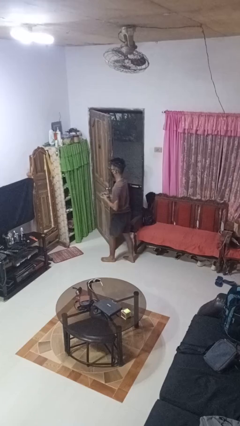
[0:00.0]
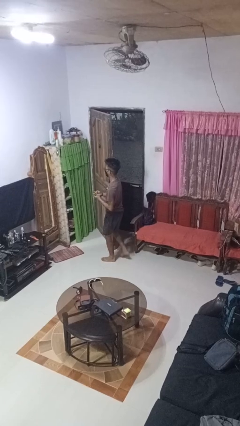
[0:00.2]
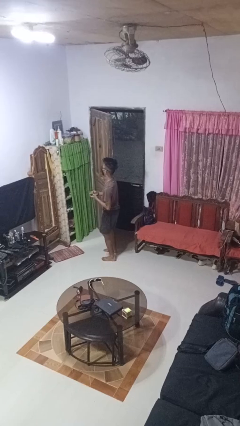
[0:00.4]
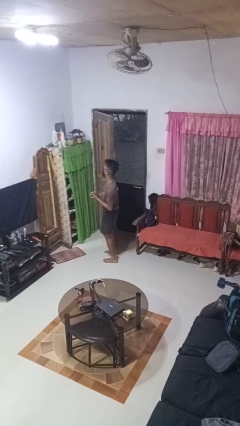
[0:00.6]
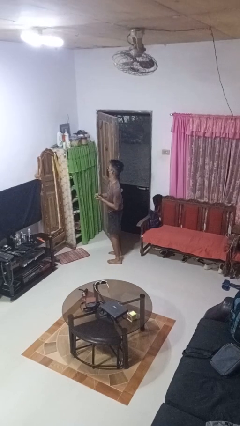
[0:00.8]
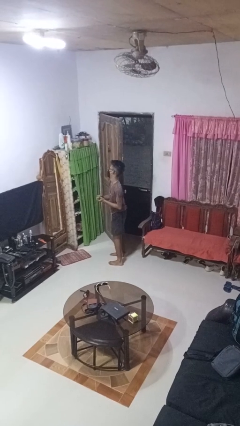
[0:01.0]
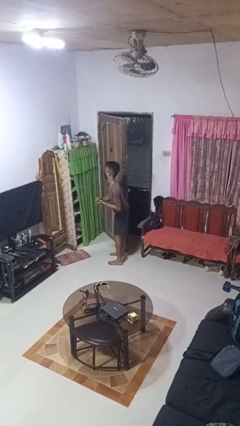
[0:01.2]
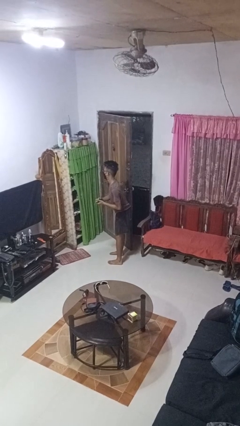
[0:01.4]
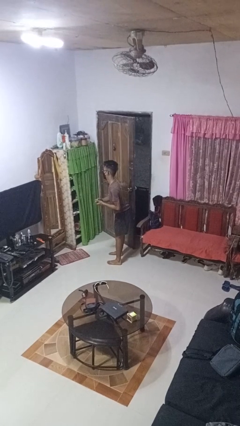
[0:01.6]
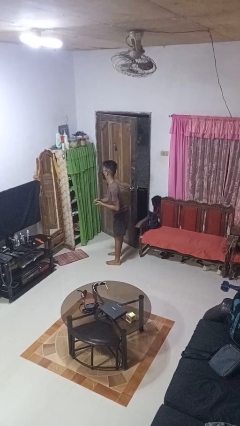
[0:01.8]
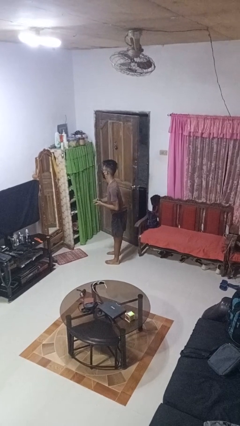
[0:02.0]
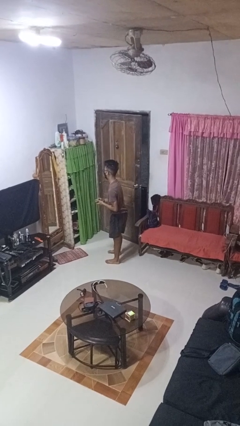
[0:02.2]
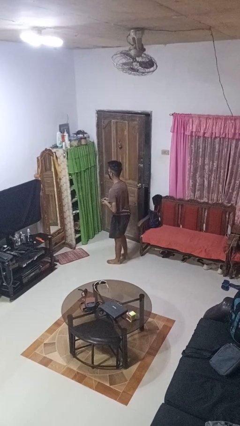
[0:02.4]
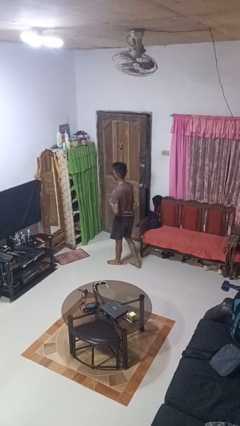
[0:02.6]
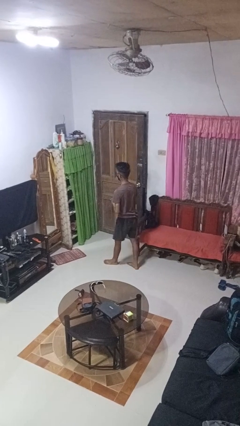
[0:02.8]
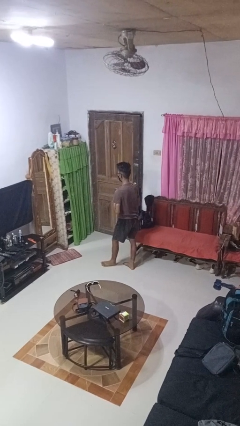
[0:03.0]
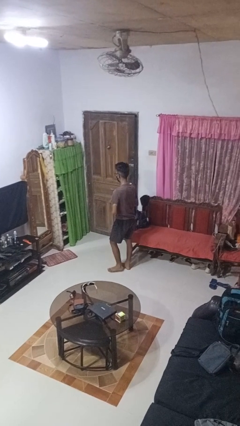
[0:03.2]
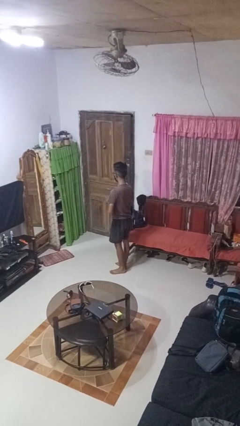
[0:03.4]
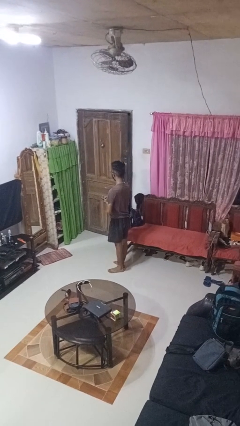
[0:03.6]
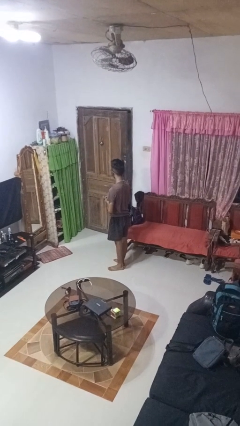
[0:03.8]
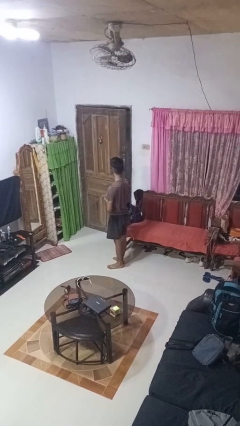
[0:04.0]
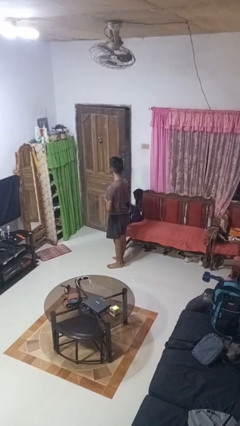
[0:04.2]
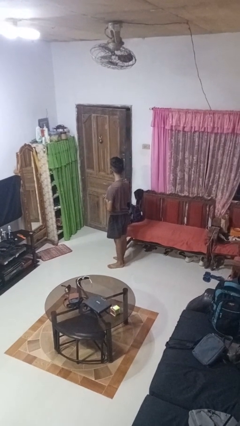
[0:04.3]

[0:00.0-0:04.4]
person closes door with hip

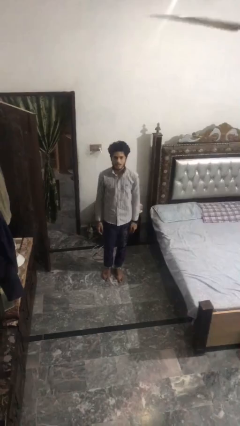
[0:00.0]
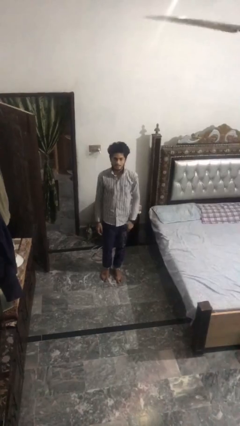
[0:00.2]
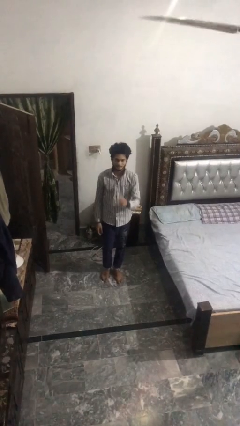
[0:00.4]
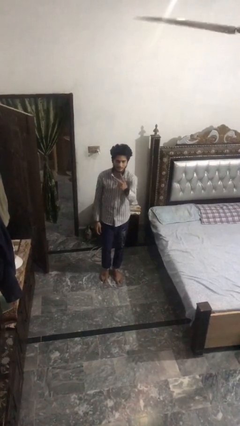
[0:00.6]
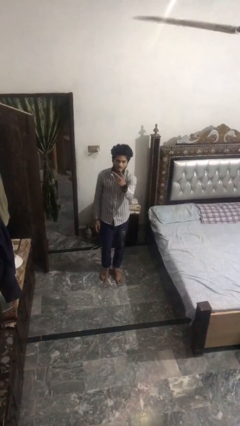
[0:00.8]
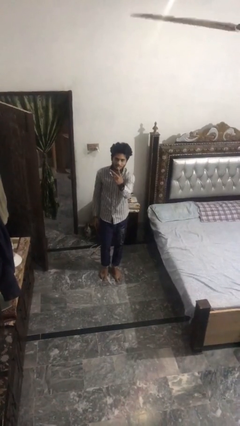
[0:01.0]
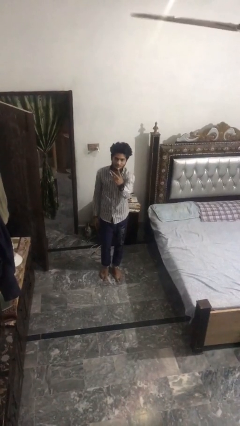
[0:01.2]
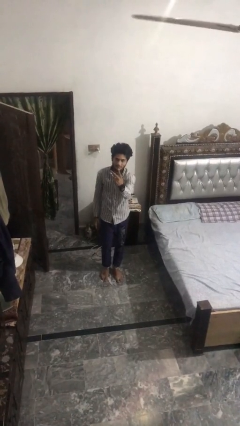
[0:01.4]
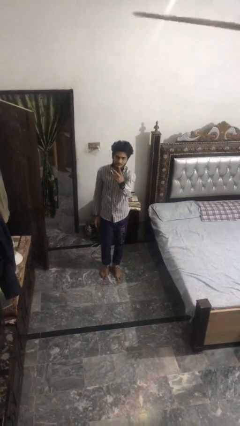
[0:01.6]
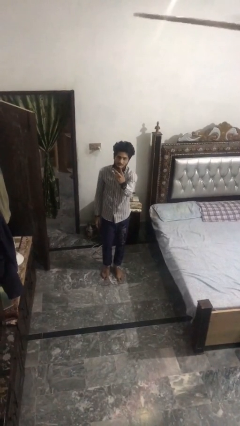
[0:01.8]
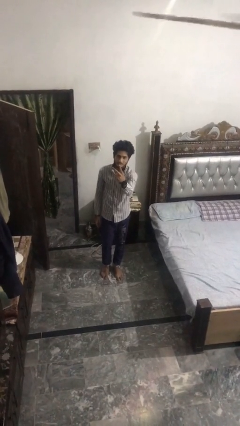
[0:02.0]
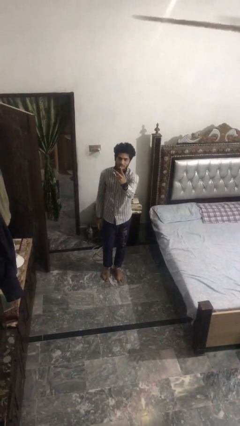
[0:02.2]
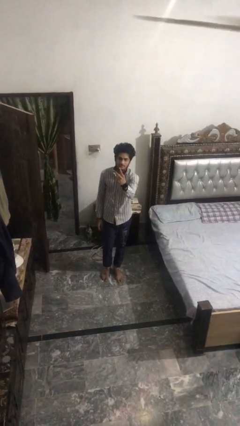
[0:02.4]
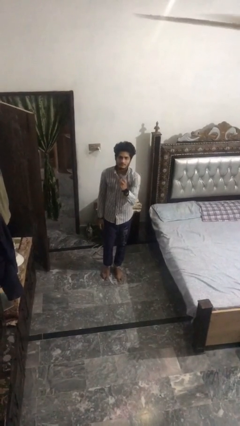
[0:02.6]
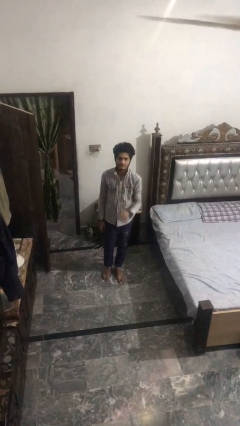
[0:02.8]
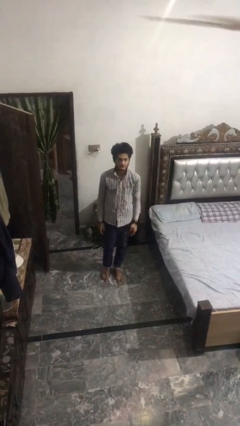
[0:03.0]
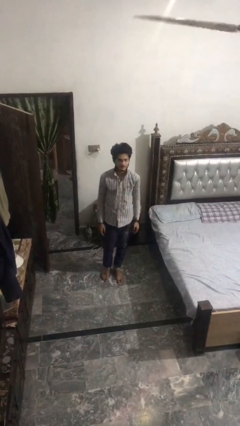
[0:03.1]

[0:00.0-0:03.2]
person gestures peace

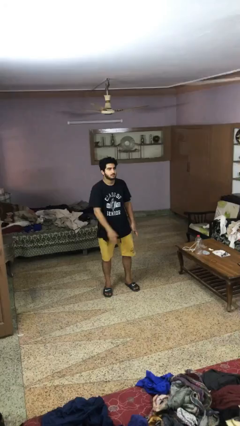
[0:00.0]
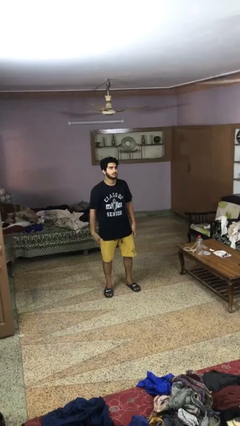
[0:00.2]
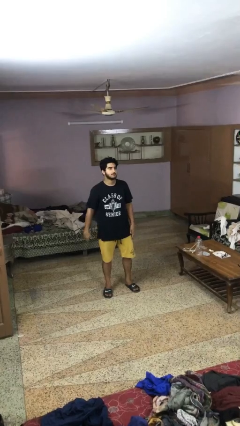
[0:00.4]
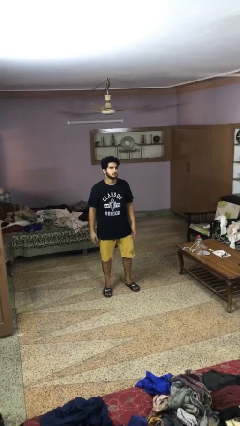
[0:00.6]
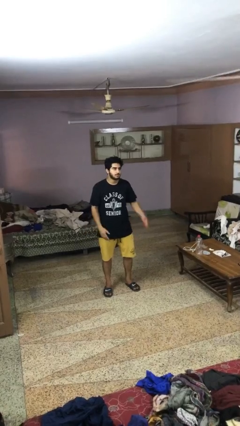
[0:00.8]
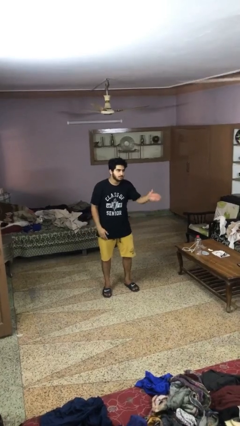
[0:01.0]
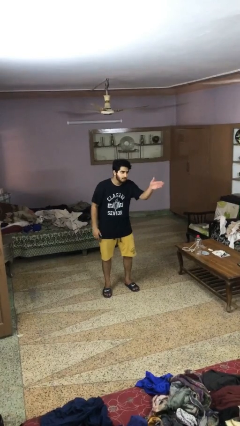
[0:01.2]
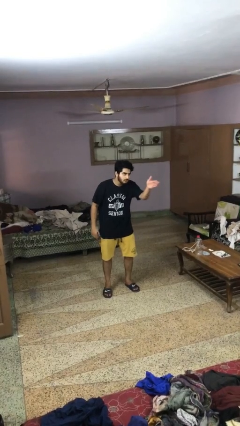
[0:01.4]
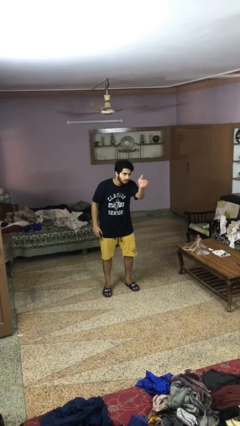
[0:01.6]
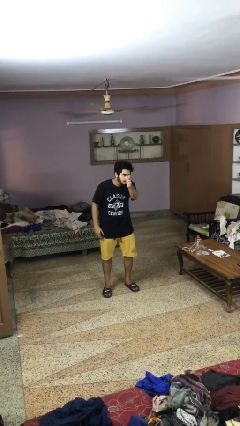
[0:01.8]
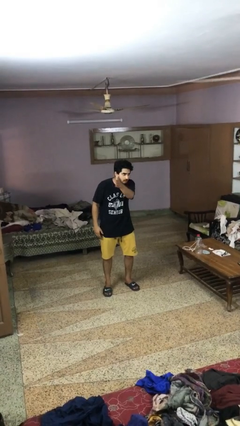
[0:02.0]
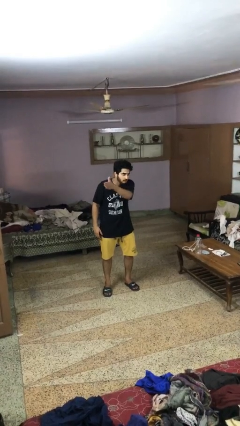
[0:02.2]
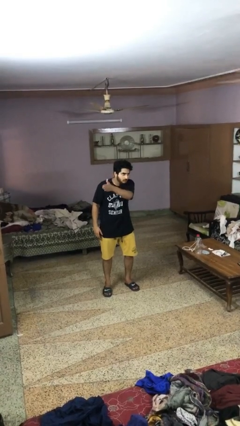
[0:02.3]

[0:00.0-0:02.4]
person gestures swipe right

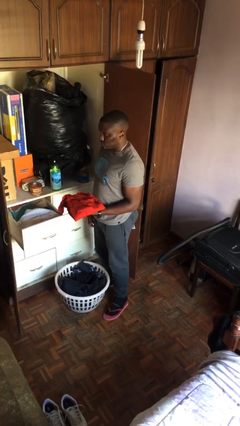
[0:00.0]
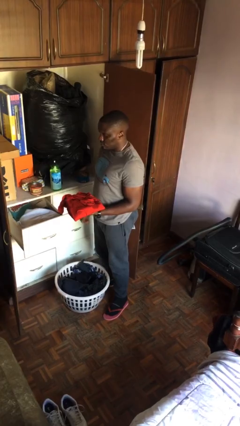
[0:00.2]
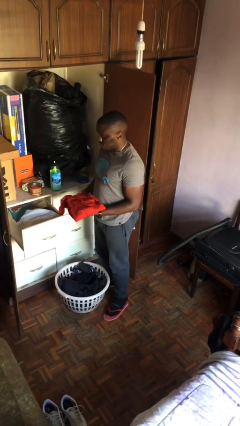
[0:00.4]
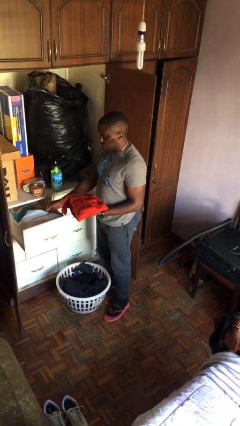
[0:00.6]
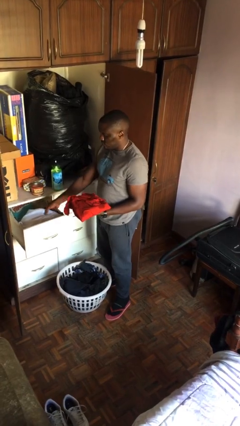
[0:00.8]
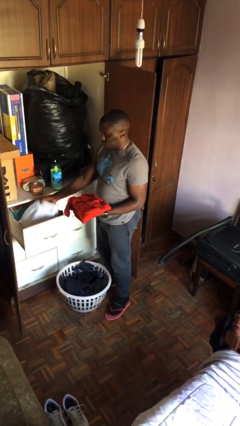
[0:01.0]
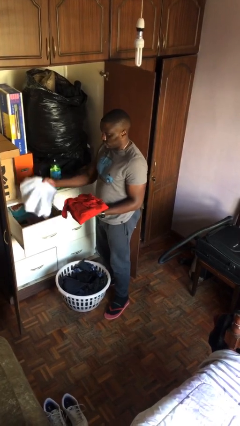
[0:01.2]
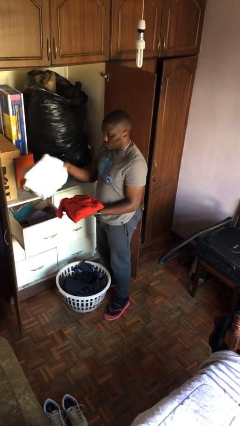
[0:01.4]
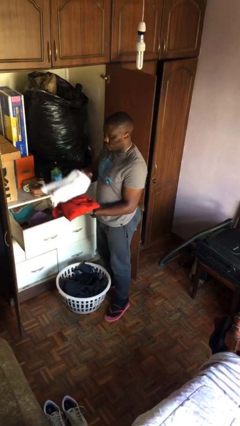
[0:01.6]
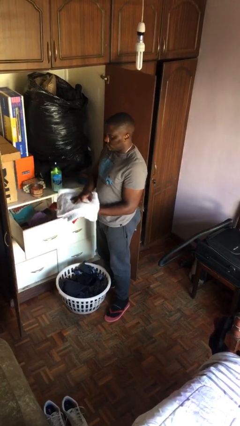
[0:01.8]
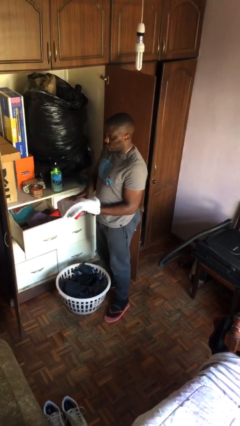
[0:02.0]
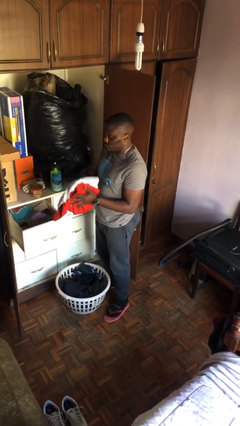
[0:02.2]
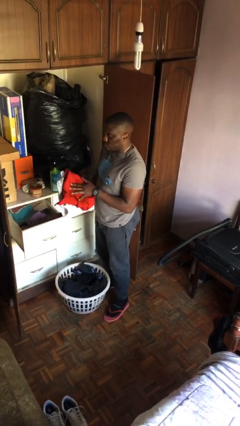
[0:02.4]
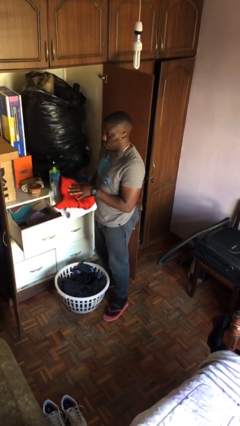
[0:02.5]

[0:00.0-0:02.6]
person takes clothes from dresser

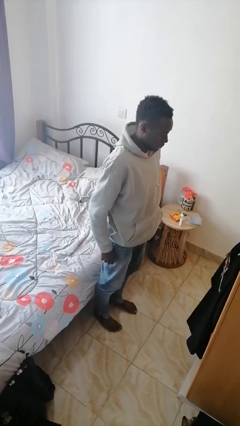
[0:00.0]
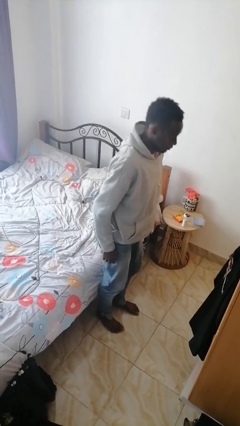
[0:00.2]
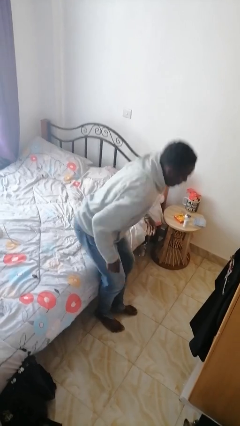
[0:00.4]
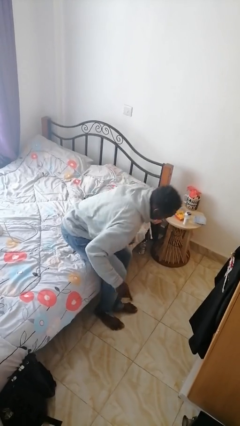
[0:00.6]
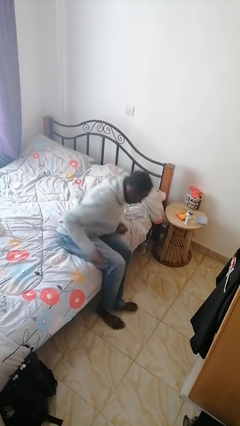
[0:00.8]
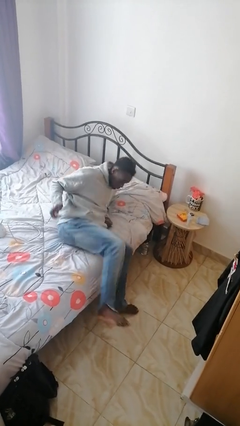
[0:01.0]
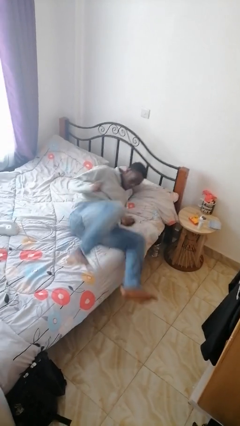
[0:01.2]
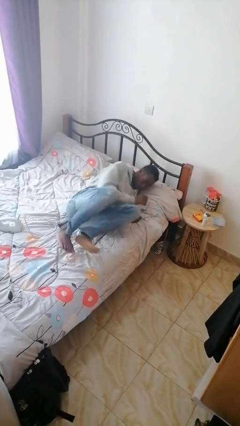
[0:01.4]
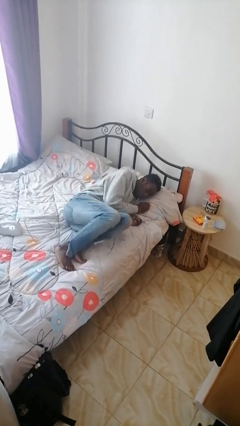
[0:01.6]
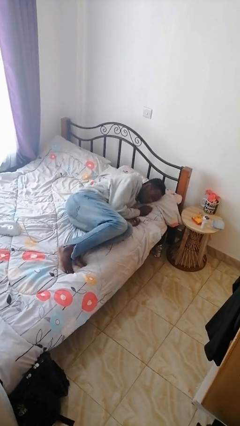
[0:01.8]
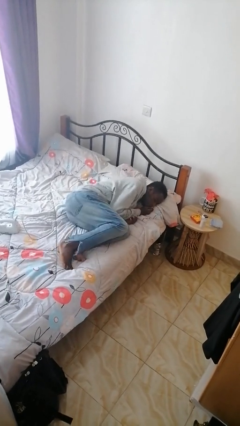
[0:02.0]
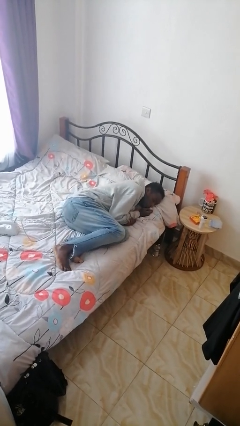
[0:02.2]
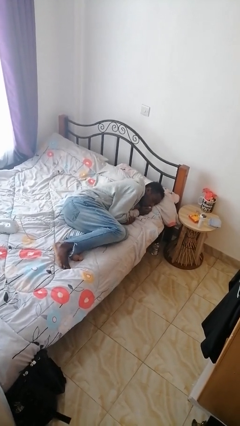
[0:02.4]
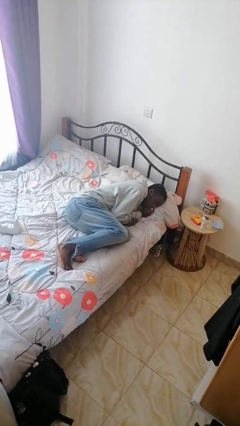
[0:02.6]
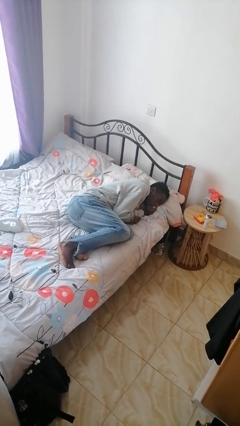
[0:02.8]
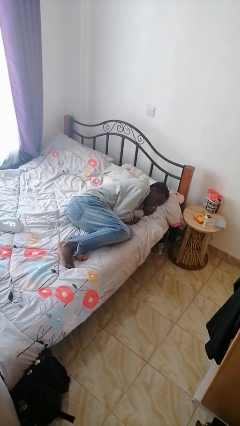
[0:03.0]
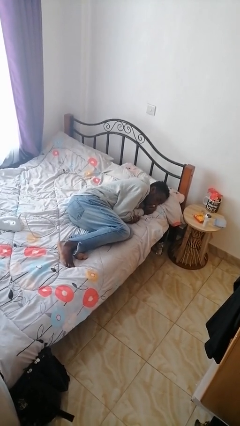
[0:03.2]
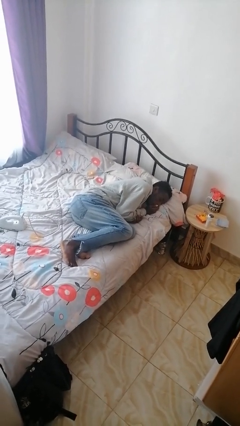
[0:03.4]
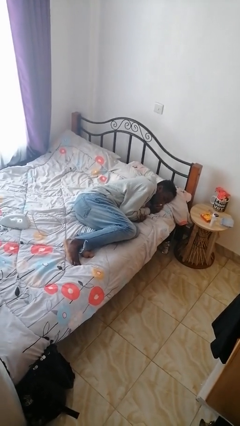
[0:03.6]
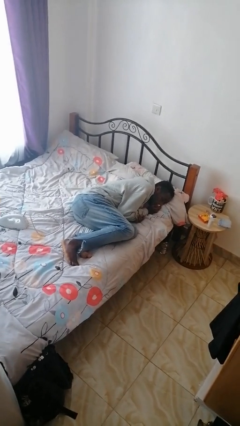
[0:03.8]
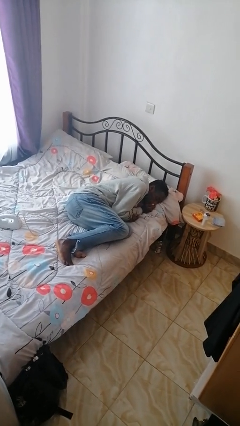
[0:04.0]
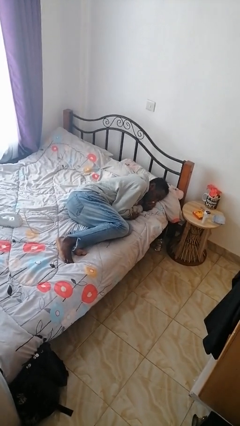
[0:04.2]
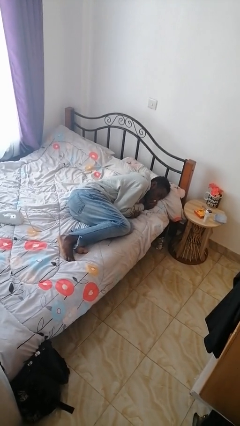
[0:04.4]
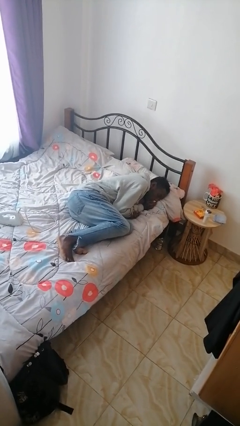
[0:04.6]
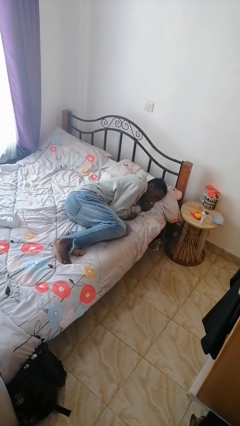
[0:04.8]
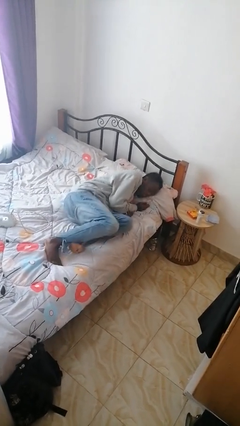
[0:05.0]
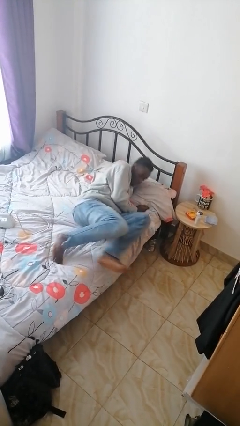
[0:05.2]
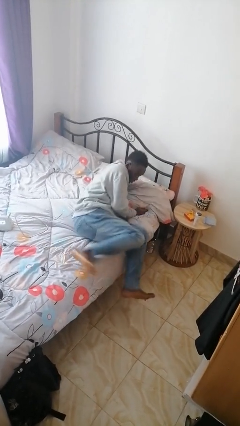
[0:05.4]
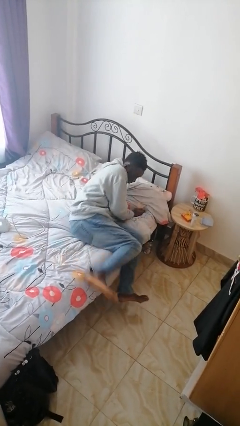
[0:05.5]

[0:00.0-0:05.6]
person lies down on bed
